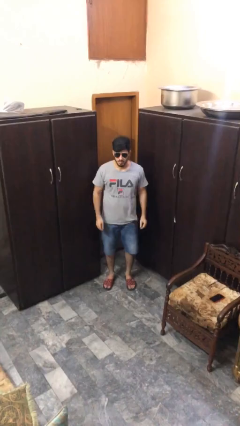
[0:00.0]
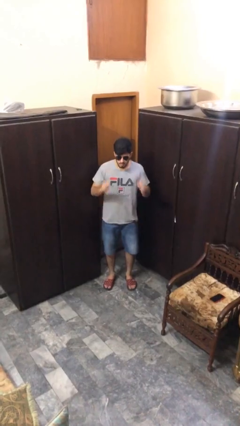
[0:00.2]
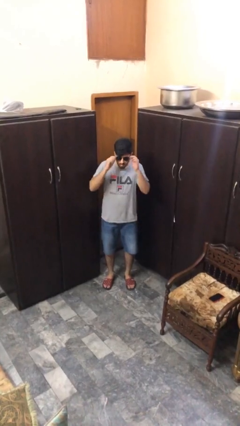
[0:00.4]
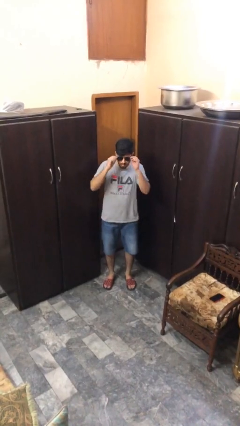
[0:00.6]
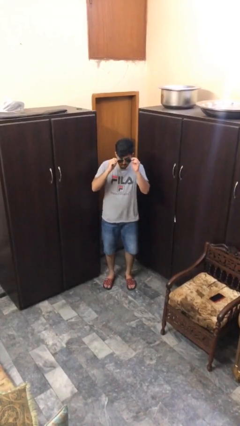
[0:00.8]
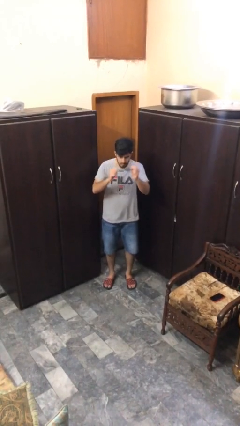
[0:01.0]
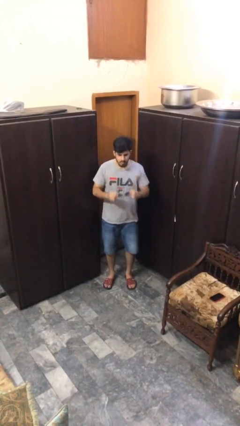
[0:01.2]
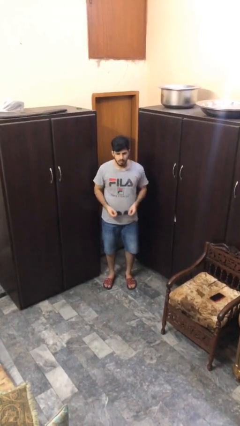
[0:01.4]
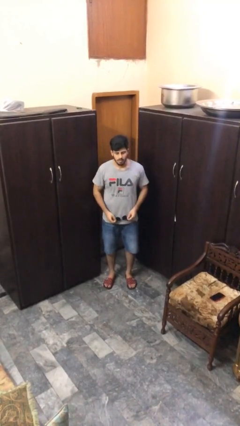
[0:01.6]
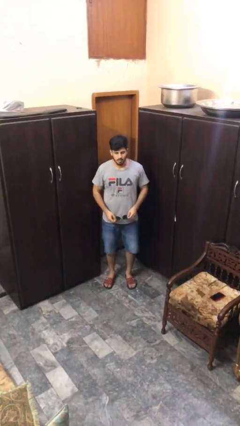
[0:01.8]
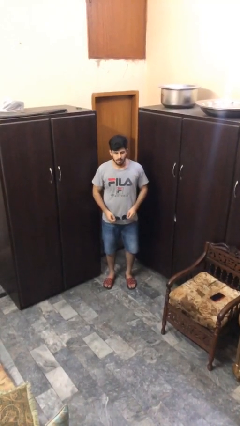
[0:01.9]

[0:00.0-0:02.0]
person takes off sunglasses

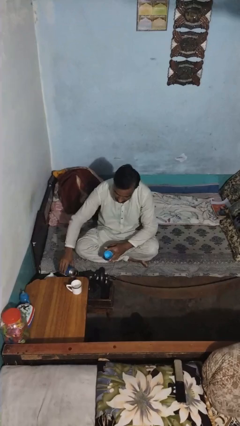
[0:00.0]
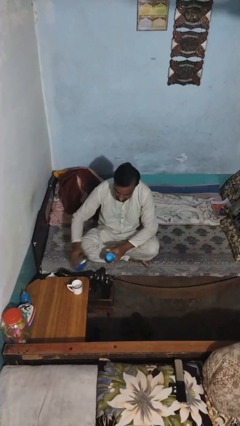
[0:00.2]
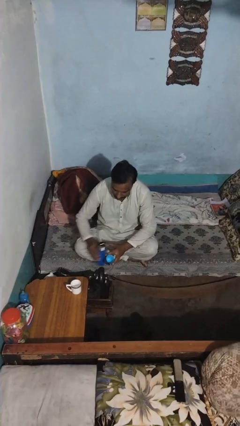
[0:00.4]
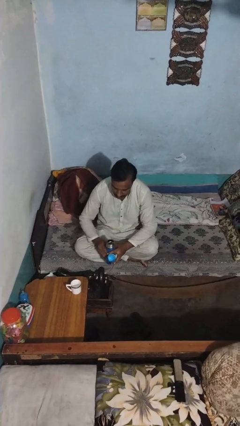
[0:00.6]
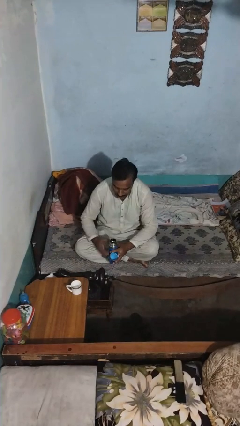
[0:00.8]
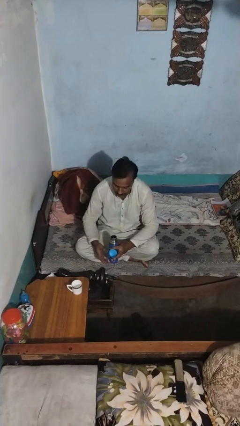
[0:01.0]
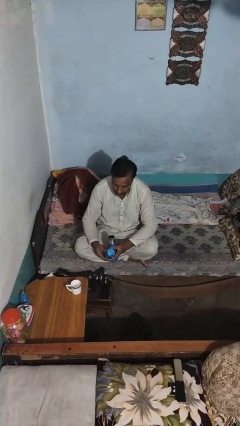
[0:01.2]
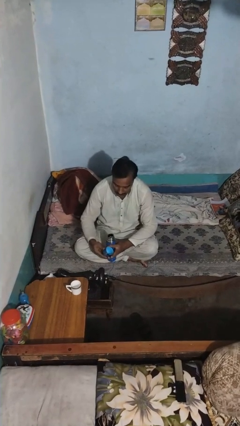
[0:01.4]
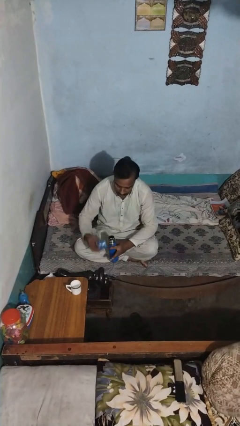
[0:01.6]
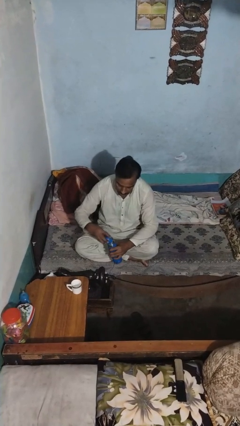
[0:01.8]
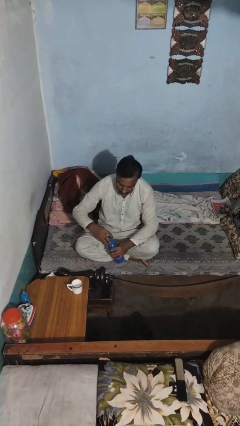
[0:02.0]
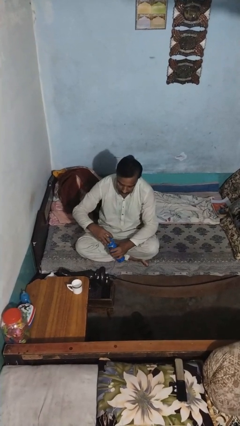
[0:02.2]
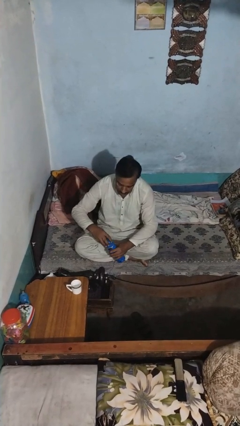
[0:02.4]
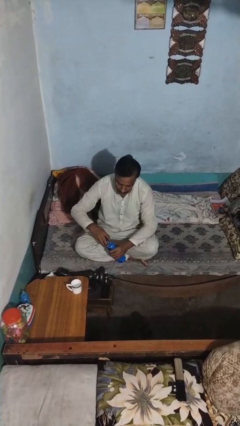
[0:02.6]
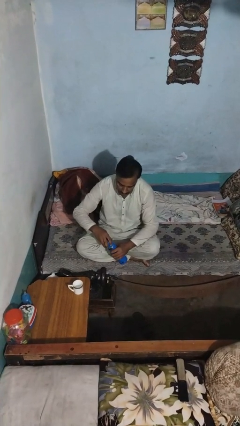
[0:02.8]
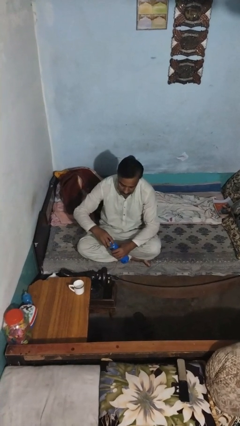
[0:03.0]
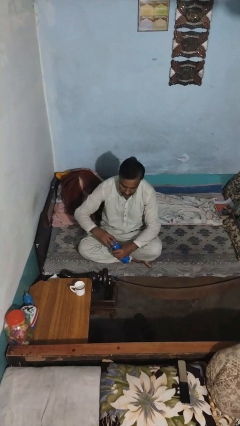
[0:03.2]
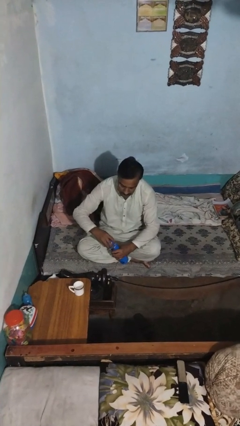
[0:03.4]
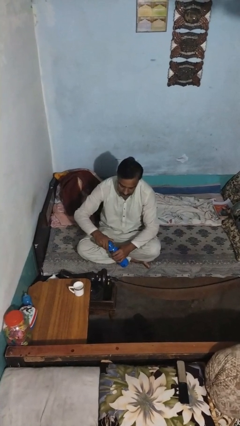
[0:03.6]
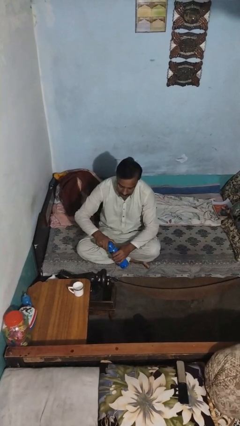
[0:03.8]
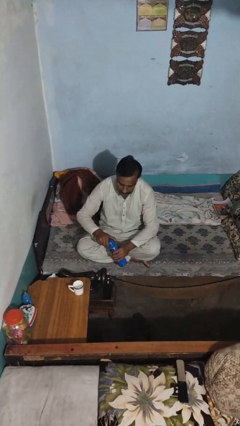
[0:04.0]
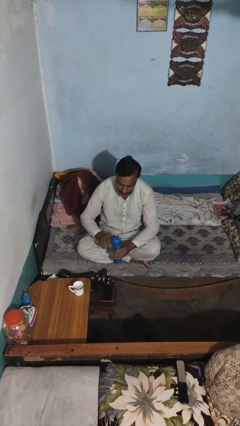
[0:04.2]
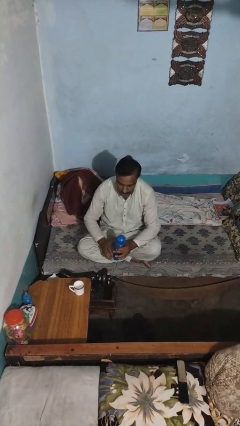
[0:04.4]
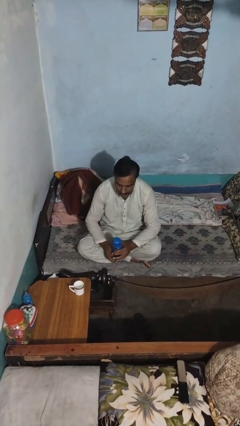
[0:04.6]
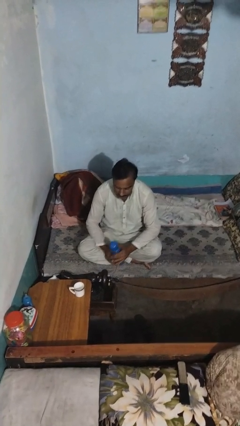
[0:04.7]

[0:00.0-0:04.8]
person screws lid to bottle

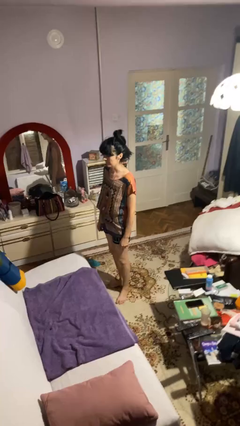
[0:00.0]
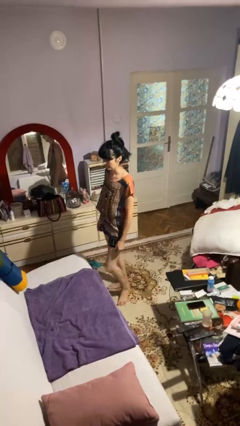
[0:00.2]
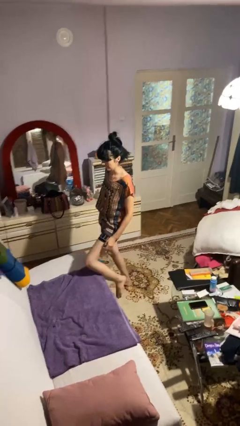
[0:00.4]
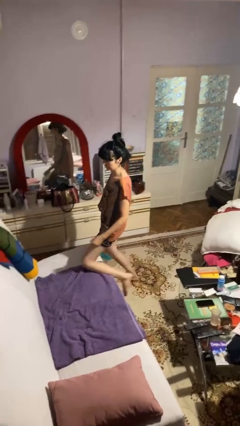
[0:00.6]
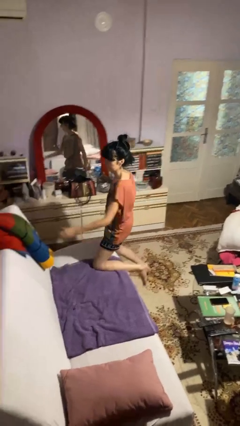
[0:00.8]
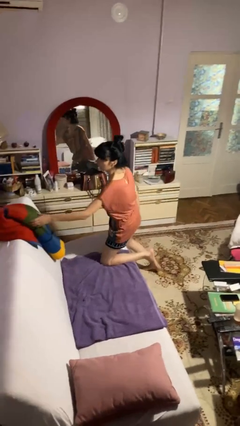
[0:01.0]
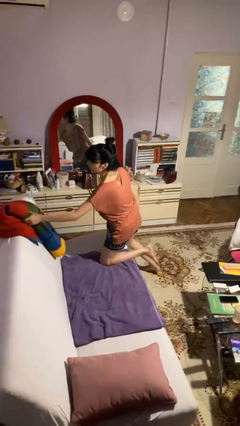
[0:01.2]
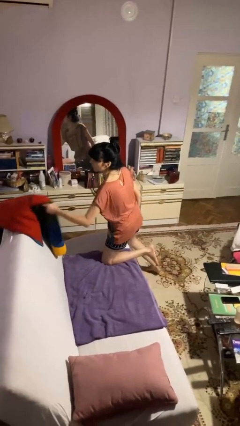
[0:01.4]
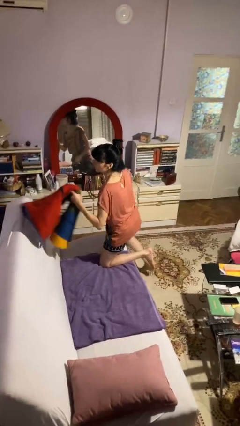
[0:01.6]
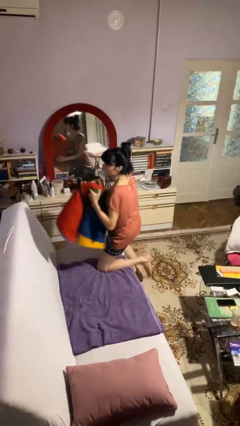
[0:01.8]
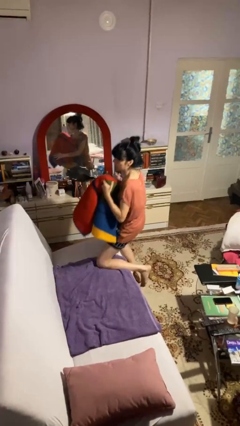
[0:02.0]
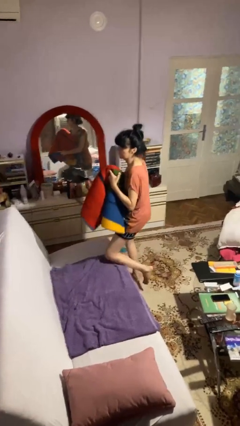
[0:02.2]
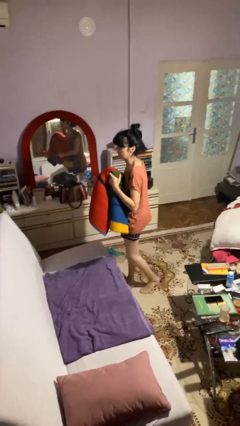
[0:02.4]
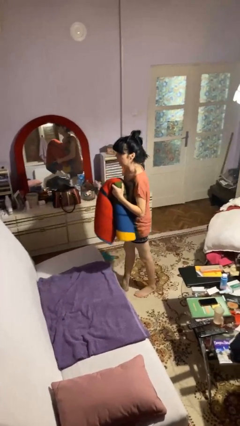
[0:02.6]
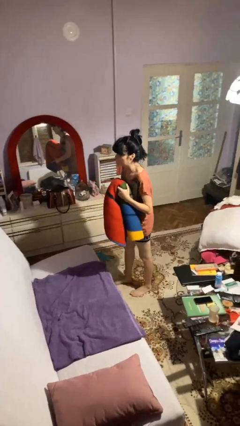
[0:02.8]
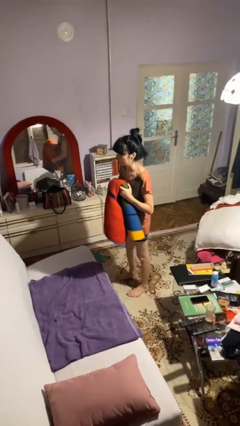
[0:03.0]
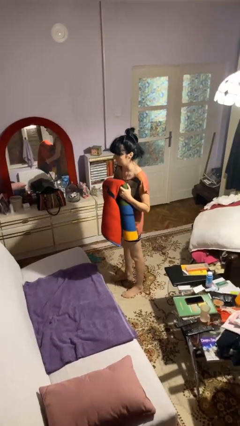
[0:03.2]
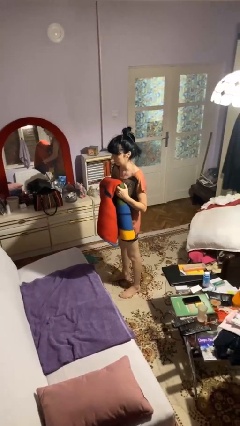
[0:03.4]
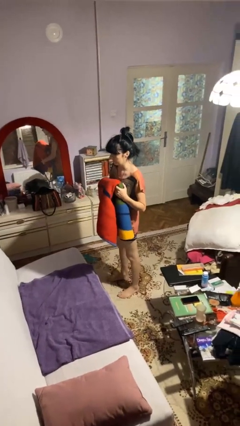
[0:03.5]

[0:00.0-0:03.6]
person picks up object from couch

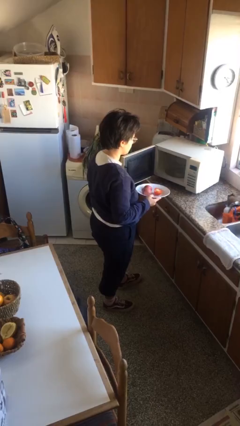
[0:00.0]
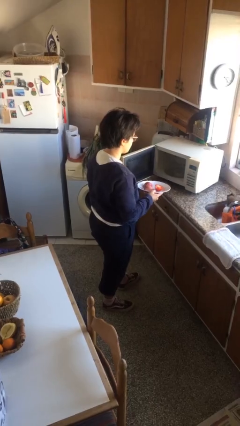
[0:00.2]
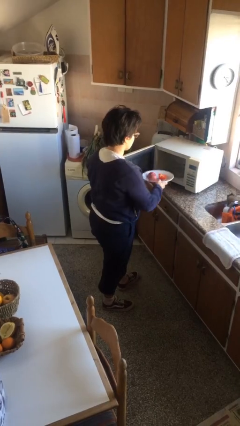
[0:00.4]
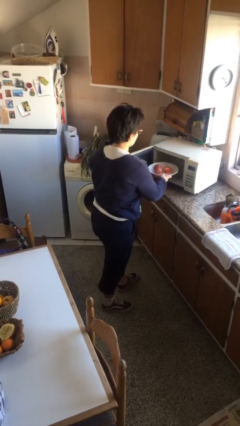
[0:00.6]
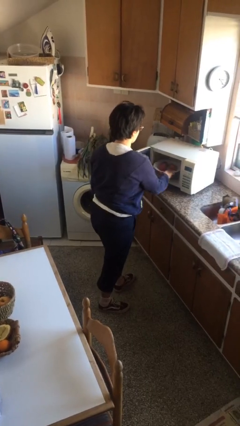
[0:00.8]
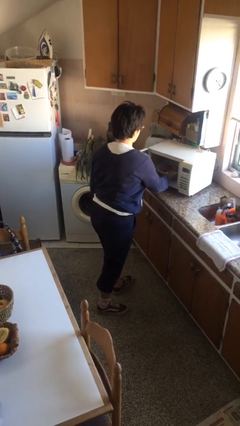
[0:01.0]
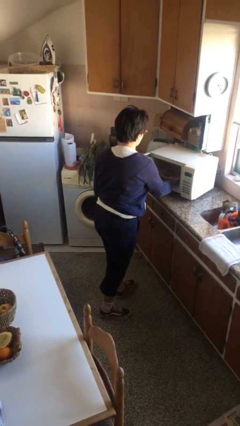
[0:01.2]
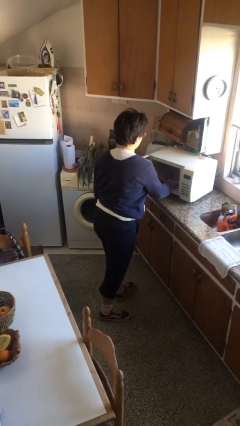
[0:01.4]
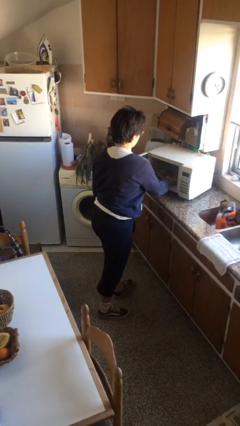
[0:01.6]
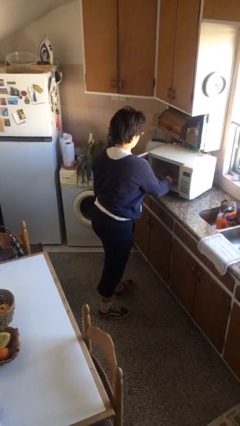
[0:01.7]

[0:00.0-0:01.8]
person puts object into microwave

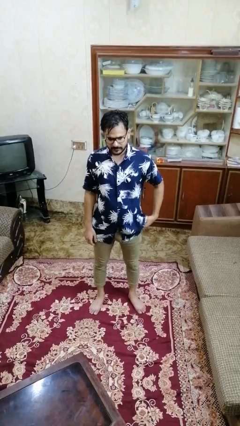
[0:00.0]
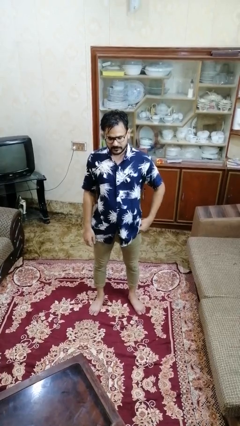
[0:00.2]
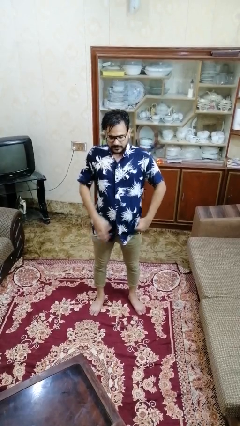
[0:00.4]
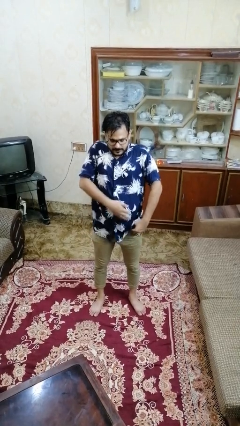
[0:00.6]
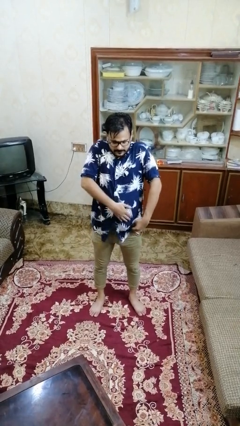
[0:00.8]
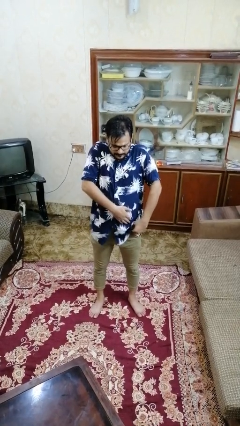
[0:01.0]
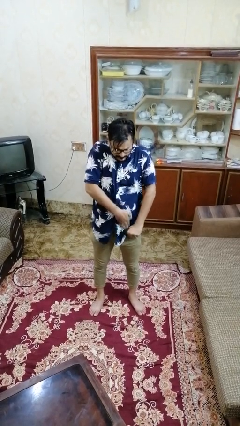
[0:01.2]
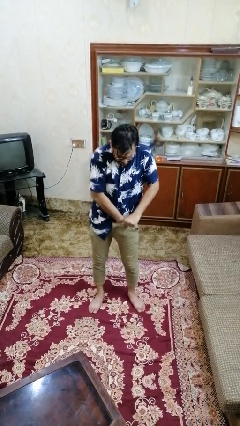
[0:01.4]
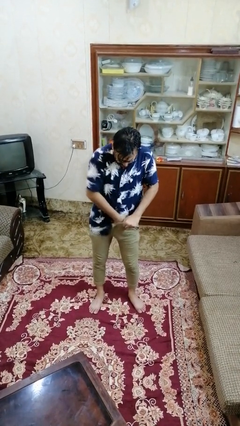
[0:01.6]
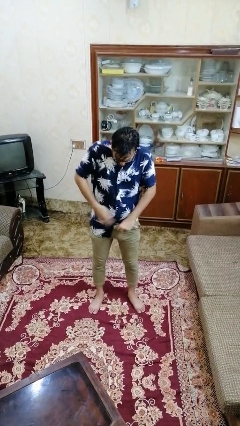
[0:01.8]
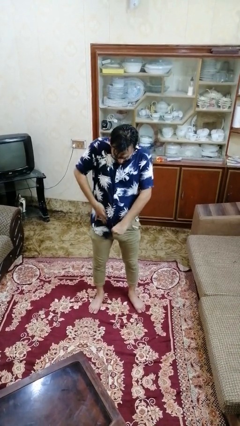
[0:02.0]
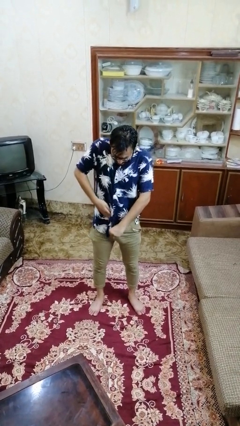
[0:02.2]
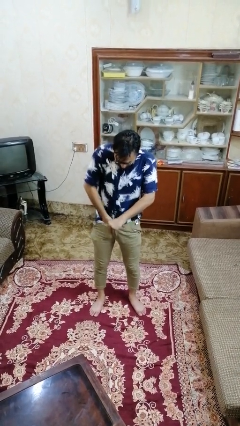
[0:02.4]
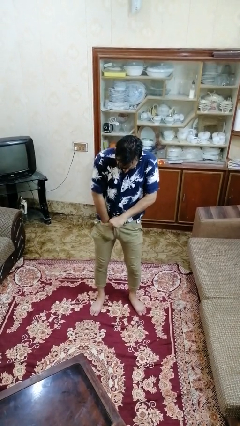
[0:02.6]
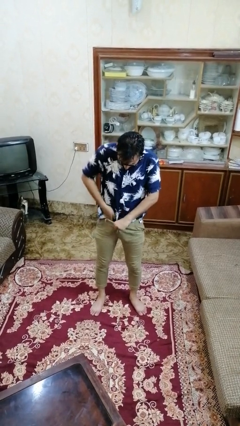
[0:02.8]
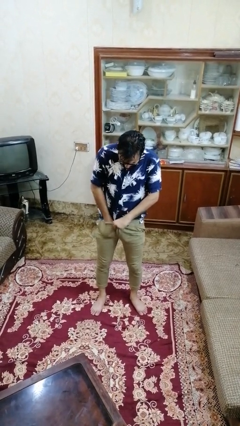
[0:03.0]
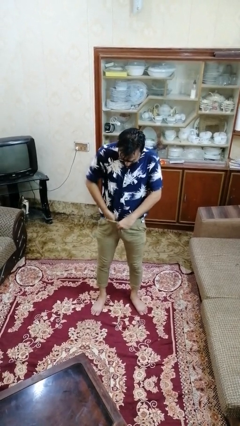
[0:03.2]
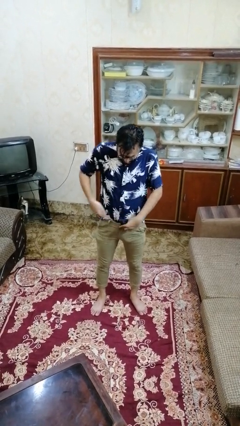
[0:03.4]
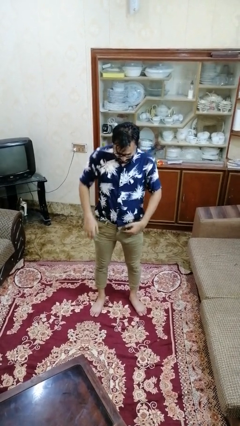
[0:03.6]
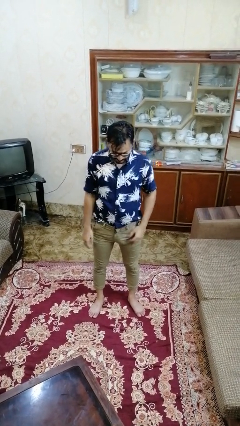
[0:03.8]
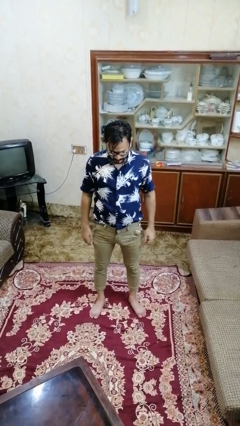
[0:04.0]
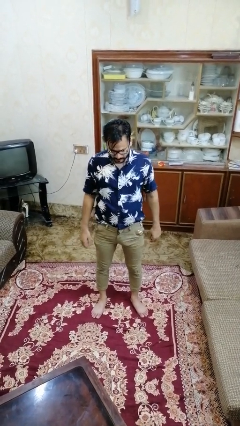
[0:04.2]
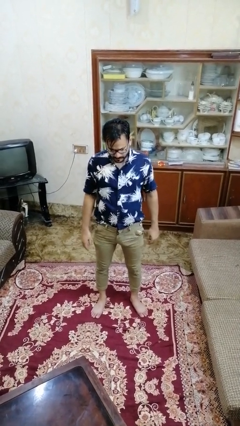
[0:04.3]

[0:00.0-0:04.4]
person tucks in shirt

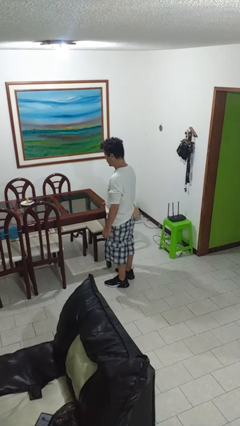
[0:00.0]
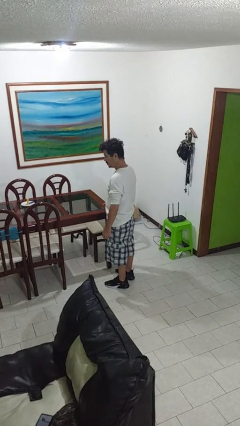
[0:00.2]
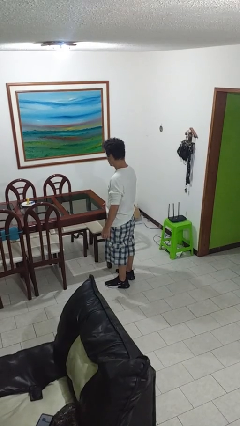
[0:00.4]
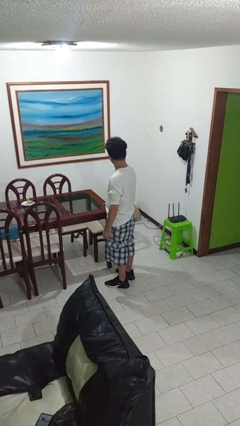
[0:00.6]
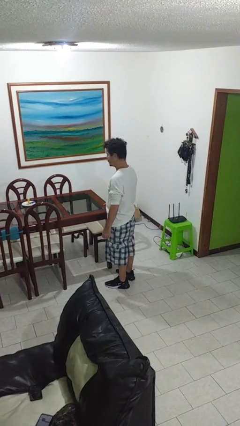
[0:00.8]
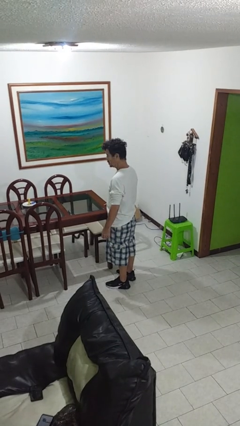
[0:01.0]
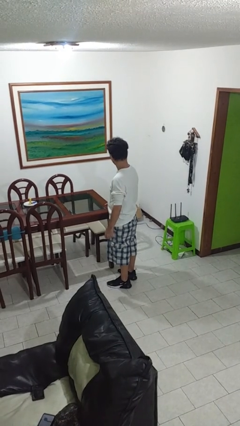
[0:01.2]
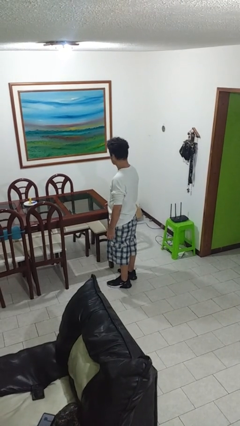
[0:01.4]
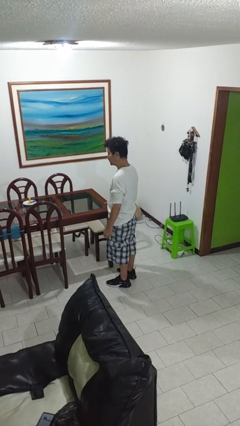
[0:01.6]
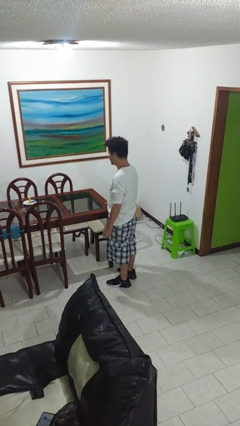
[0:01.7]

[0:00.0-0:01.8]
person shakes head
